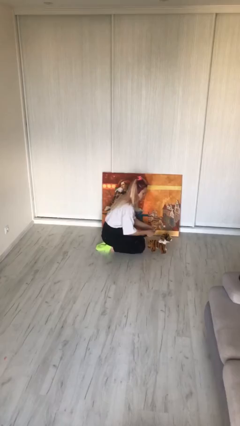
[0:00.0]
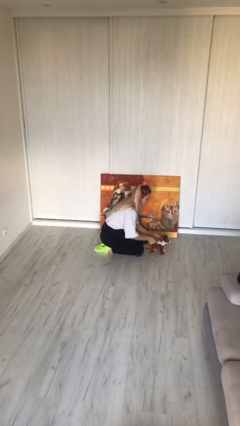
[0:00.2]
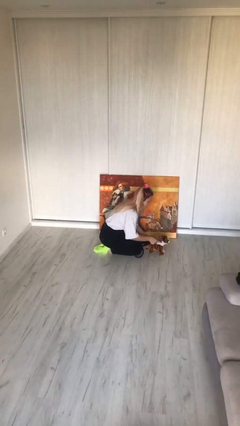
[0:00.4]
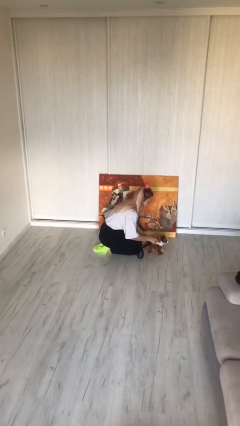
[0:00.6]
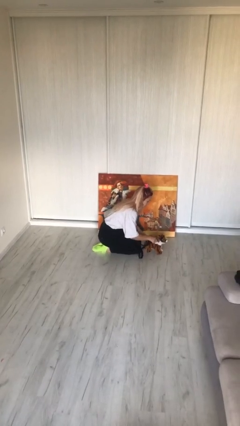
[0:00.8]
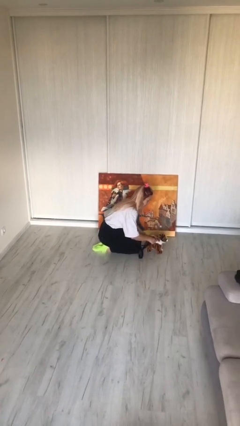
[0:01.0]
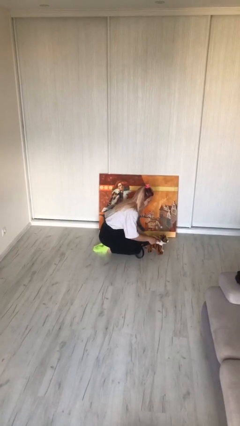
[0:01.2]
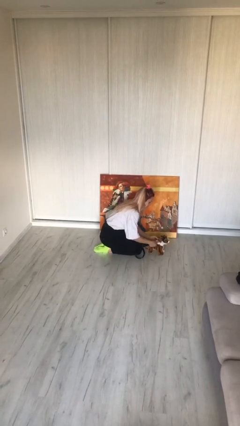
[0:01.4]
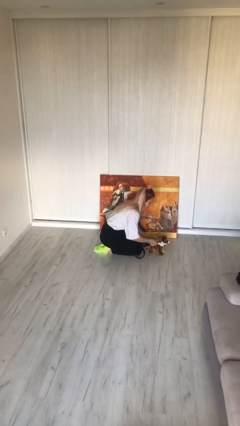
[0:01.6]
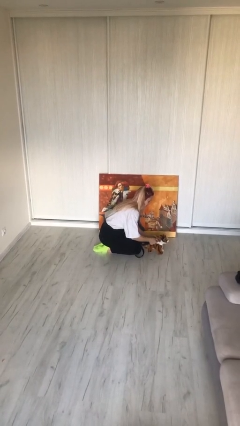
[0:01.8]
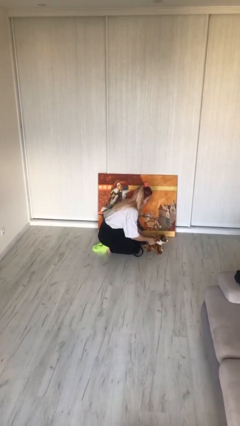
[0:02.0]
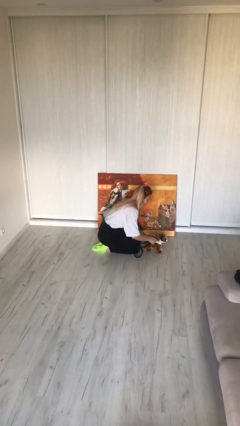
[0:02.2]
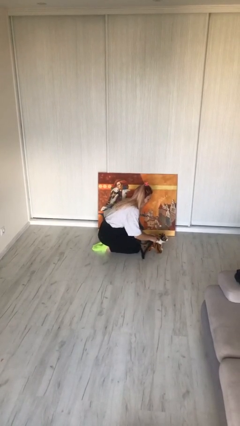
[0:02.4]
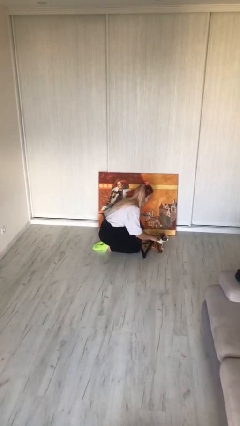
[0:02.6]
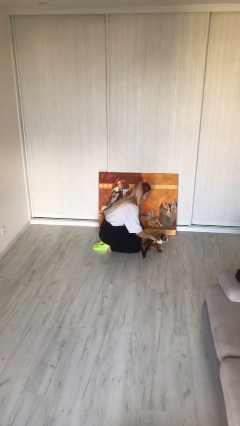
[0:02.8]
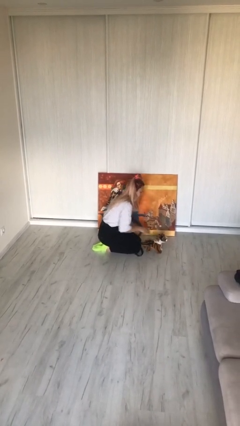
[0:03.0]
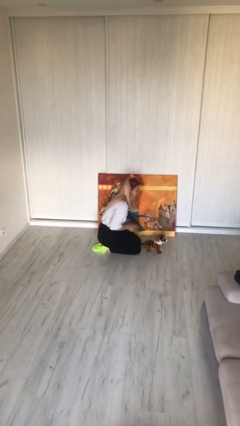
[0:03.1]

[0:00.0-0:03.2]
person attaches leash to dog

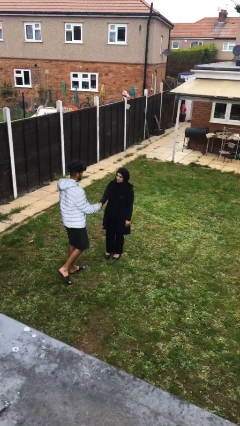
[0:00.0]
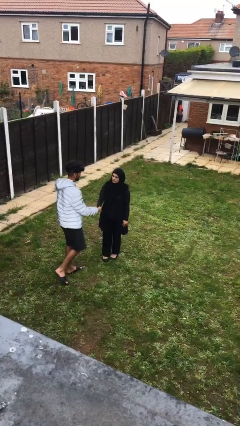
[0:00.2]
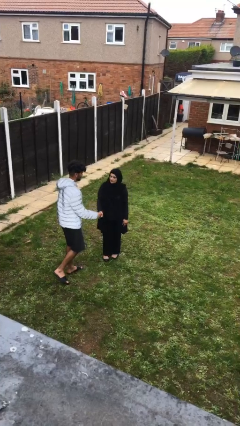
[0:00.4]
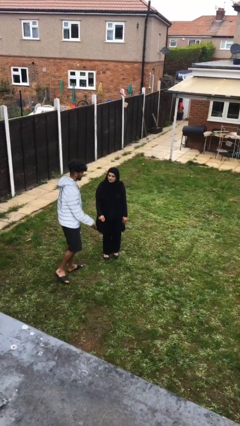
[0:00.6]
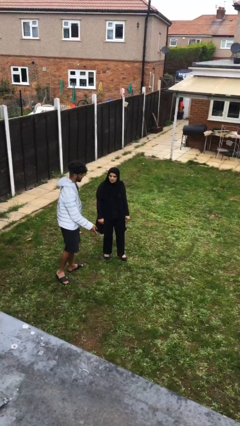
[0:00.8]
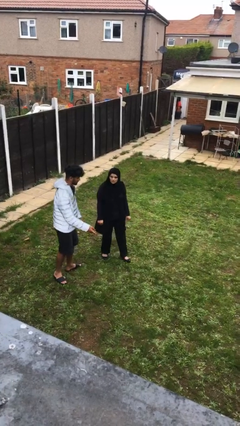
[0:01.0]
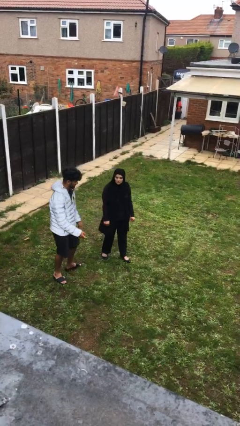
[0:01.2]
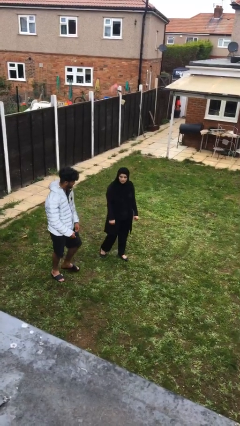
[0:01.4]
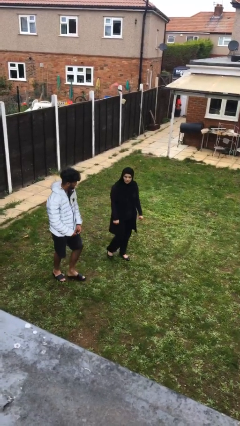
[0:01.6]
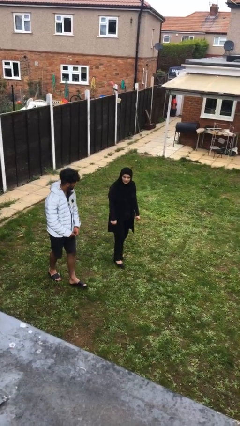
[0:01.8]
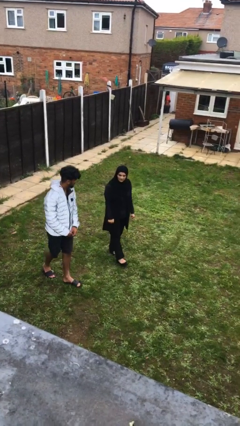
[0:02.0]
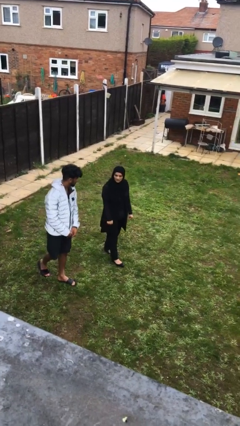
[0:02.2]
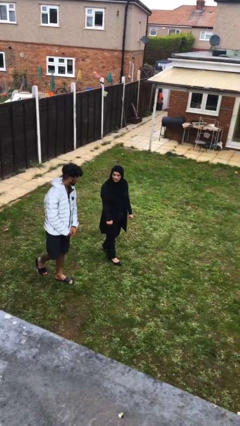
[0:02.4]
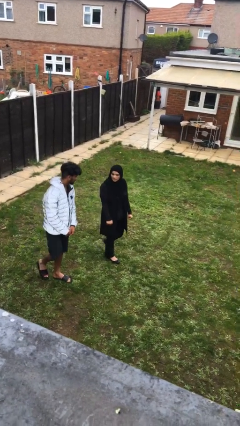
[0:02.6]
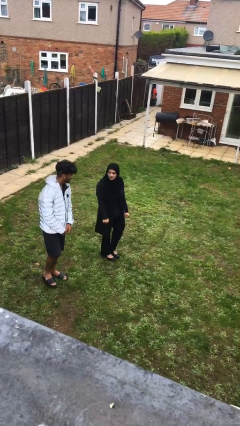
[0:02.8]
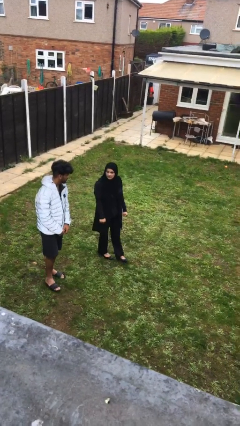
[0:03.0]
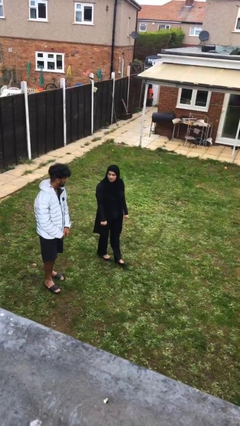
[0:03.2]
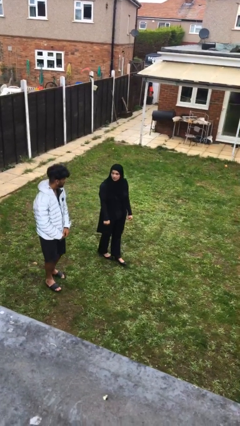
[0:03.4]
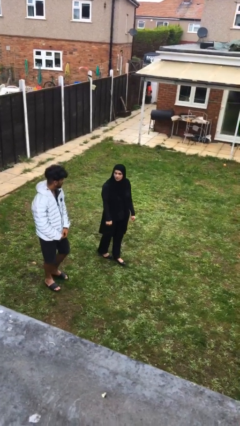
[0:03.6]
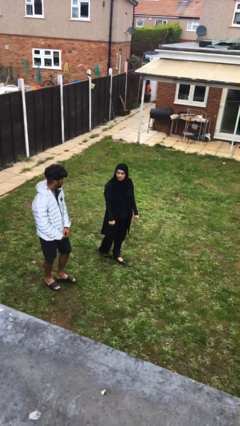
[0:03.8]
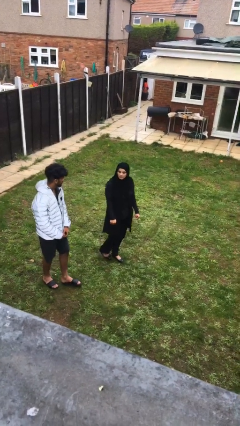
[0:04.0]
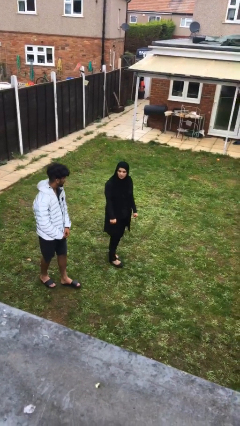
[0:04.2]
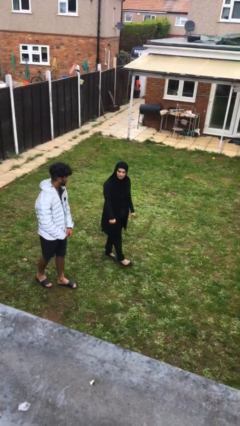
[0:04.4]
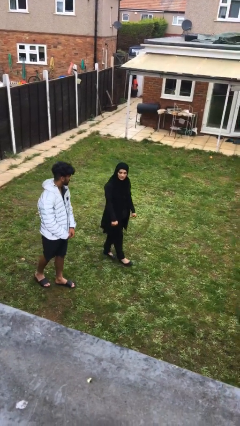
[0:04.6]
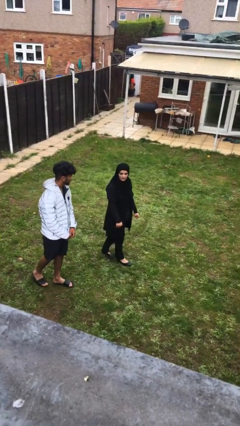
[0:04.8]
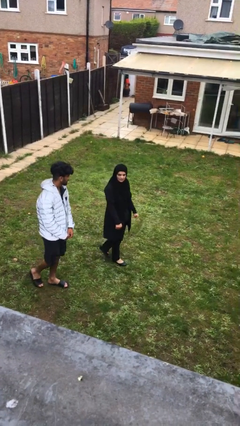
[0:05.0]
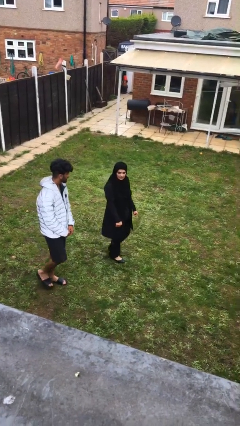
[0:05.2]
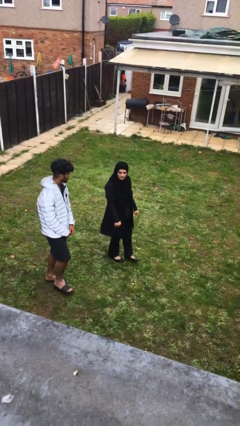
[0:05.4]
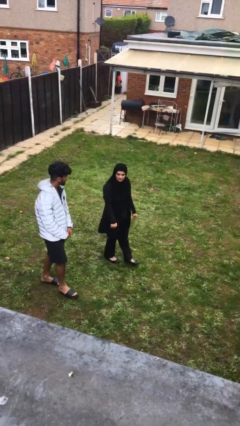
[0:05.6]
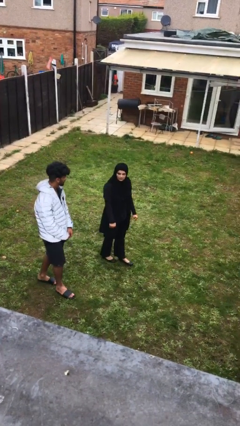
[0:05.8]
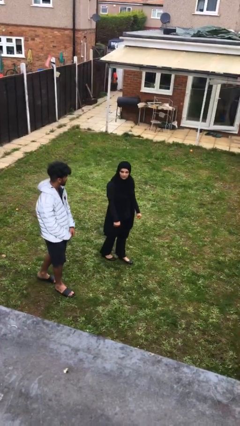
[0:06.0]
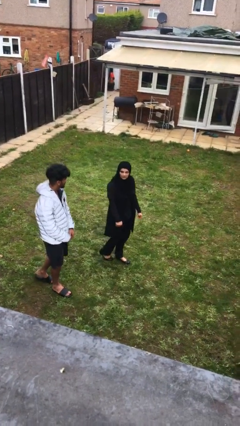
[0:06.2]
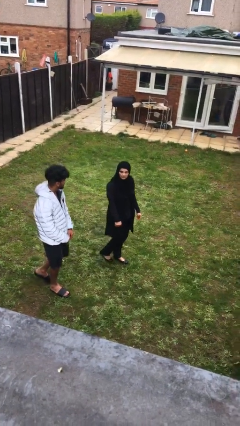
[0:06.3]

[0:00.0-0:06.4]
person talks to person

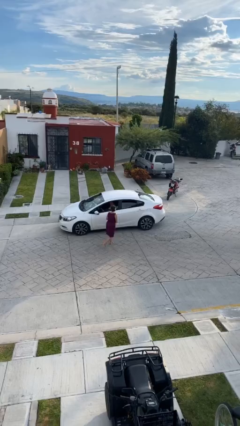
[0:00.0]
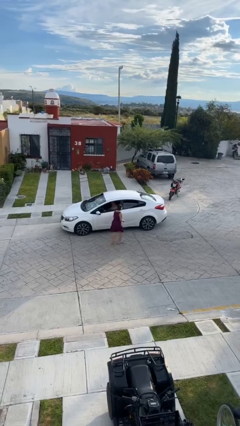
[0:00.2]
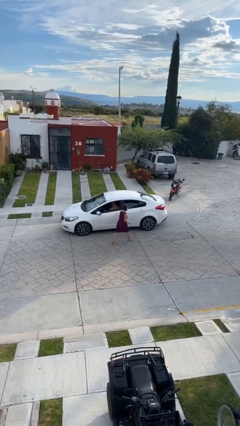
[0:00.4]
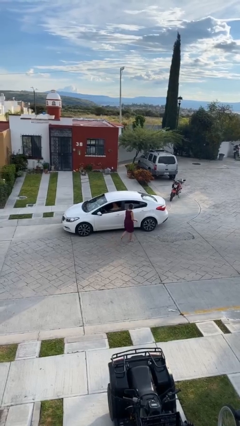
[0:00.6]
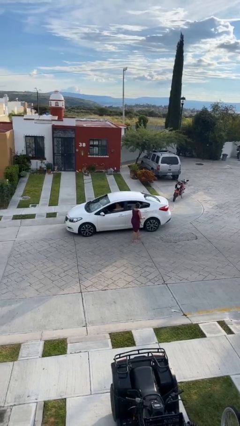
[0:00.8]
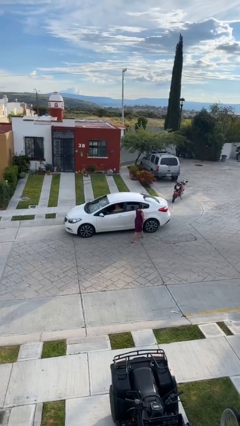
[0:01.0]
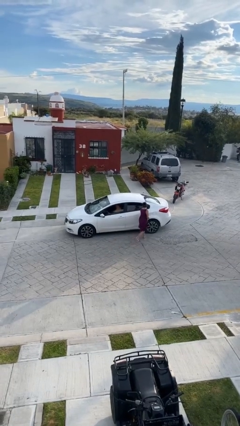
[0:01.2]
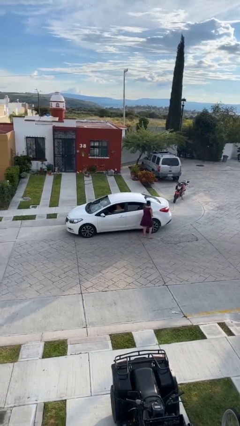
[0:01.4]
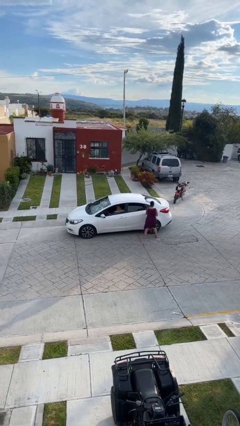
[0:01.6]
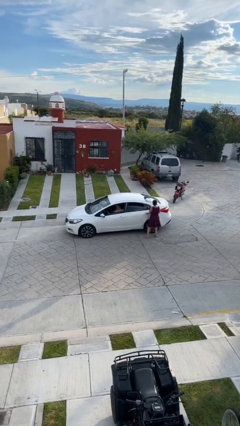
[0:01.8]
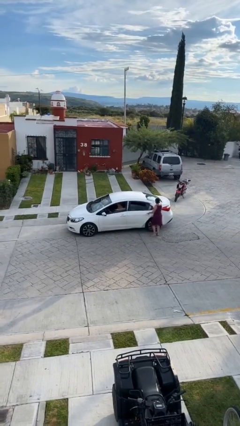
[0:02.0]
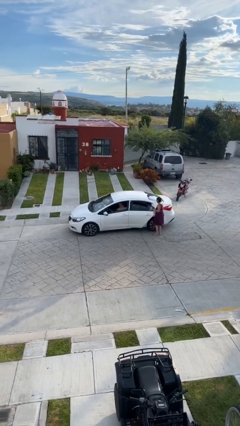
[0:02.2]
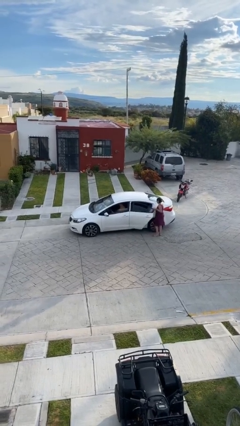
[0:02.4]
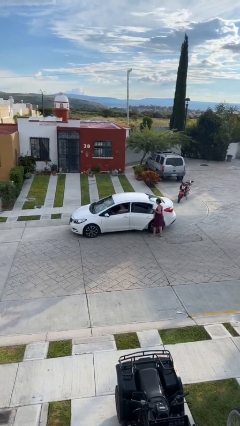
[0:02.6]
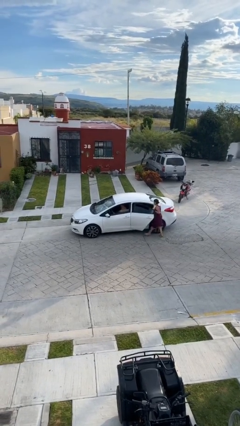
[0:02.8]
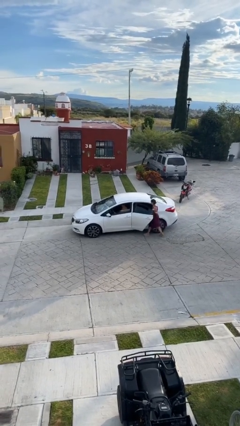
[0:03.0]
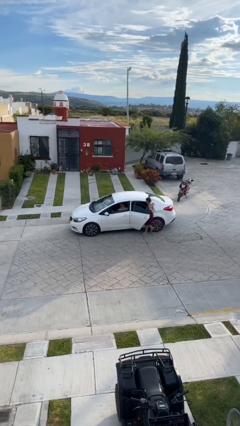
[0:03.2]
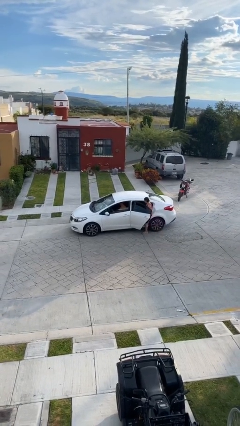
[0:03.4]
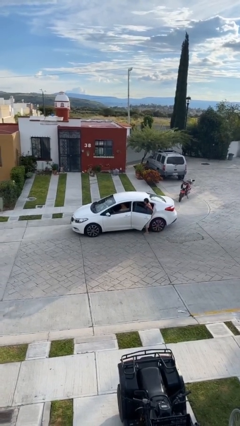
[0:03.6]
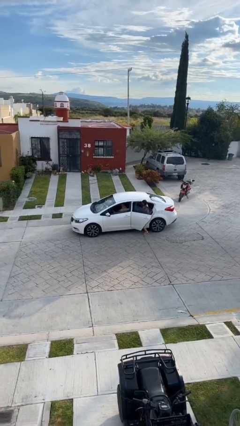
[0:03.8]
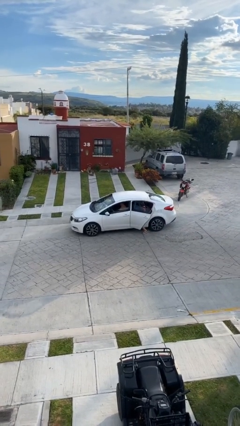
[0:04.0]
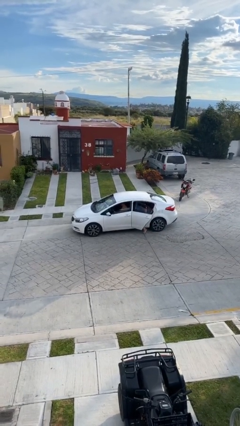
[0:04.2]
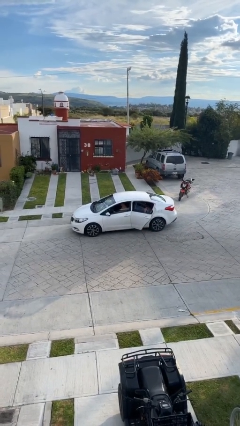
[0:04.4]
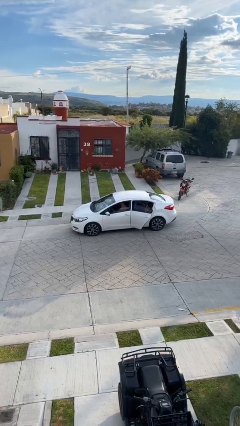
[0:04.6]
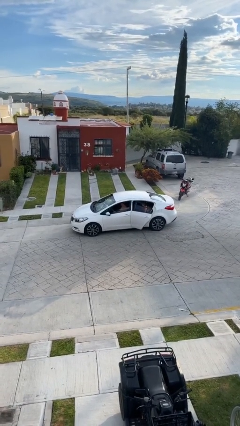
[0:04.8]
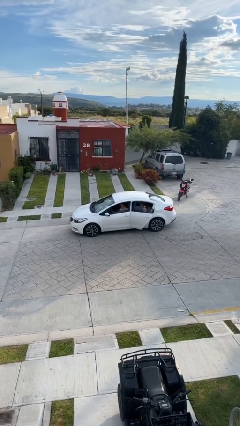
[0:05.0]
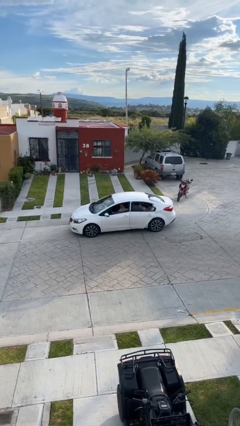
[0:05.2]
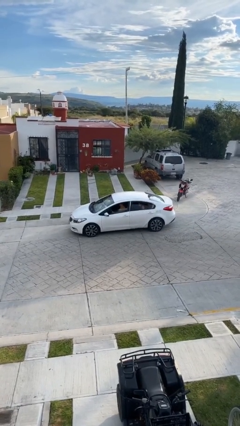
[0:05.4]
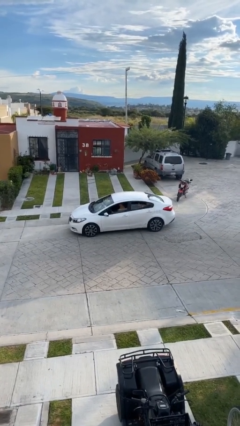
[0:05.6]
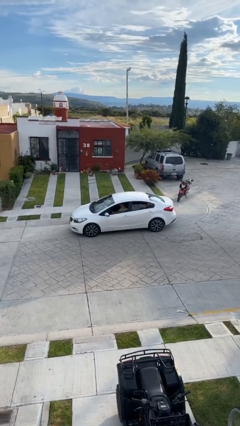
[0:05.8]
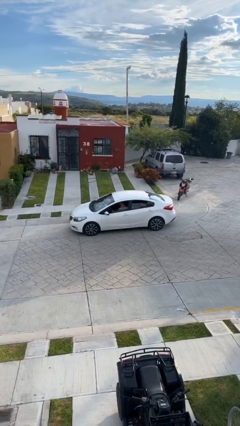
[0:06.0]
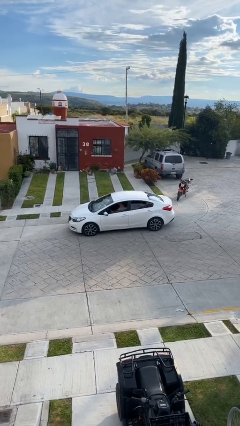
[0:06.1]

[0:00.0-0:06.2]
car picks up person

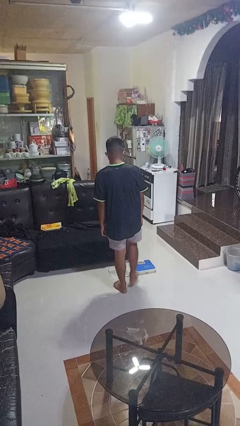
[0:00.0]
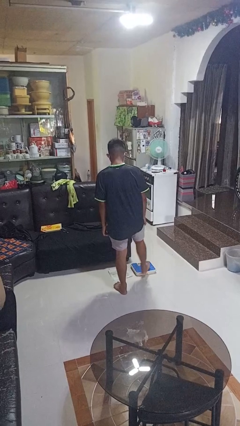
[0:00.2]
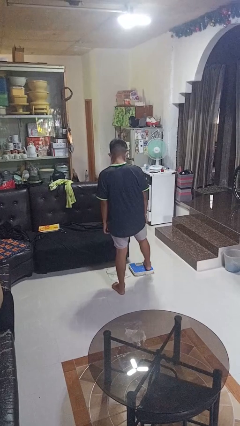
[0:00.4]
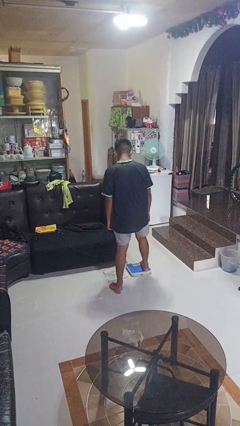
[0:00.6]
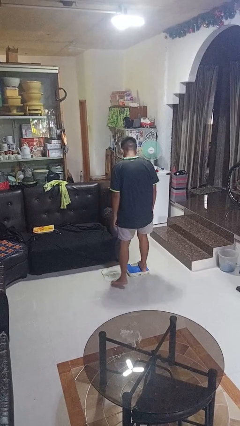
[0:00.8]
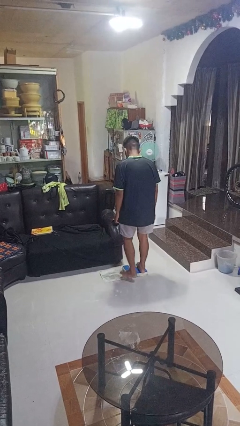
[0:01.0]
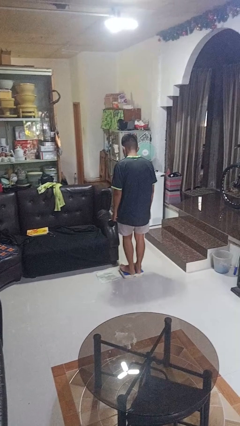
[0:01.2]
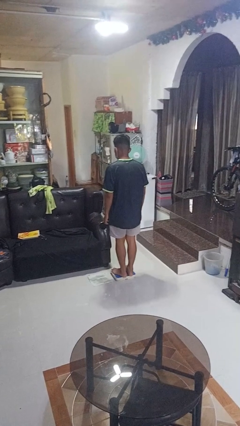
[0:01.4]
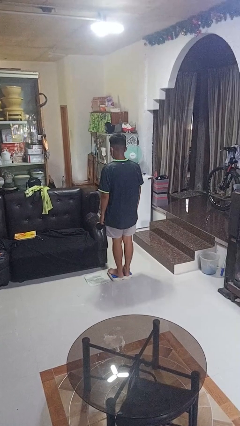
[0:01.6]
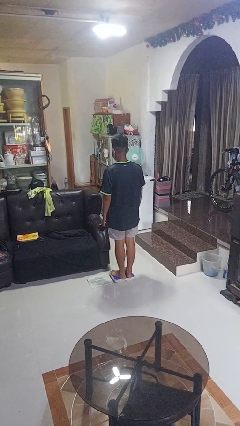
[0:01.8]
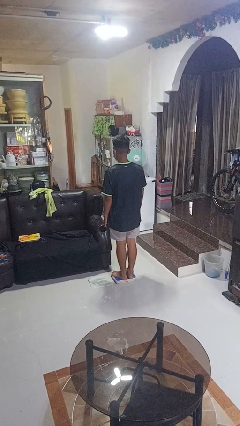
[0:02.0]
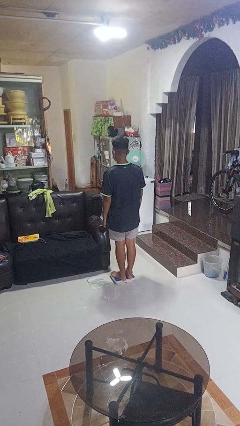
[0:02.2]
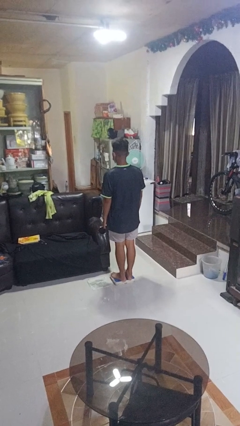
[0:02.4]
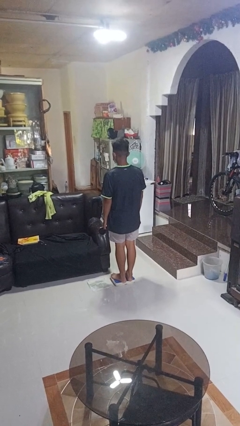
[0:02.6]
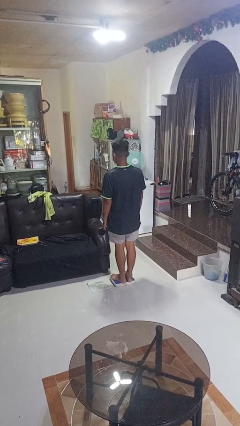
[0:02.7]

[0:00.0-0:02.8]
person uses bodyweight scale
